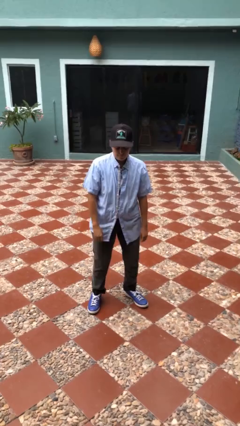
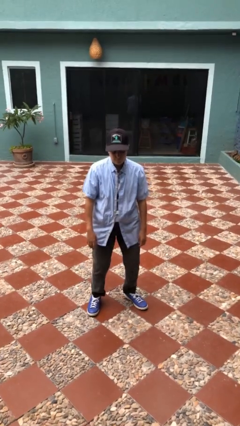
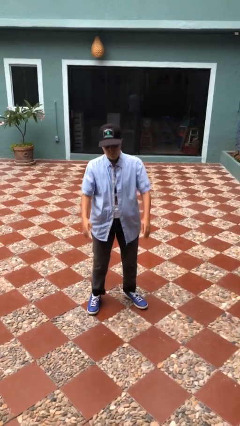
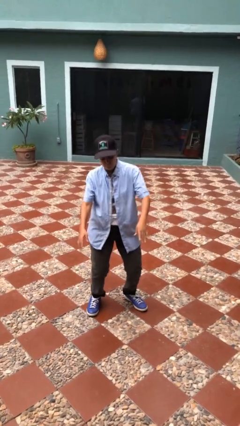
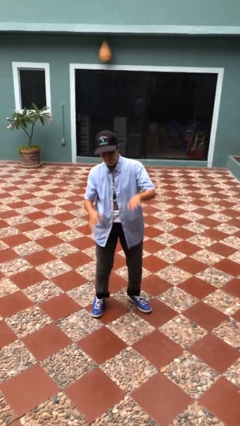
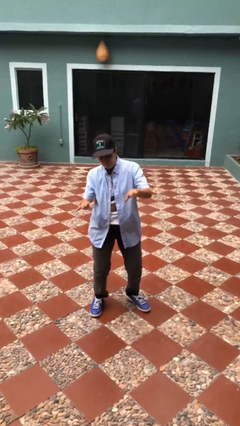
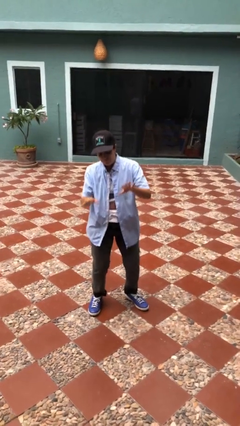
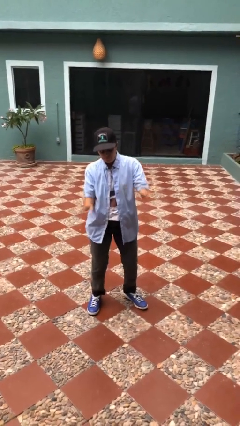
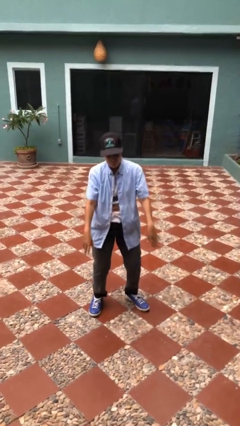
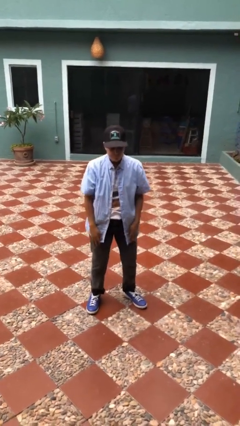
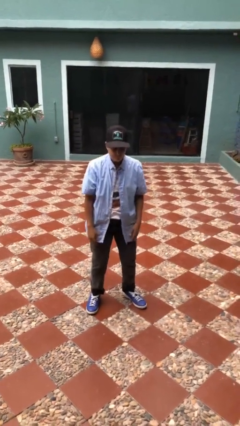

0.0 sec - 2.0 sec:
person dances in place

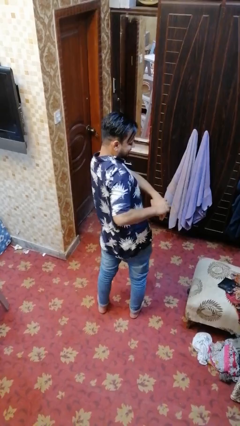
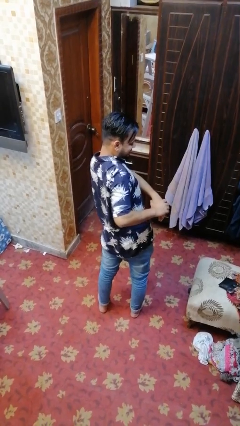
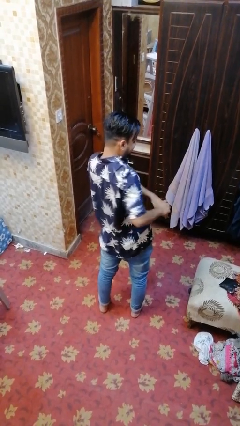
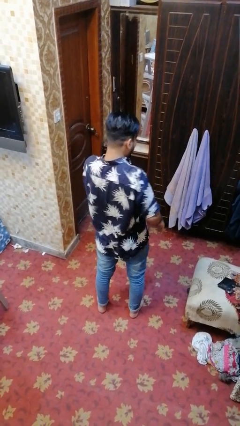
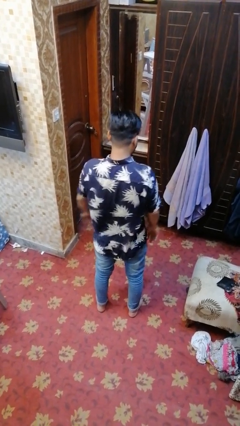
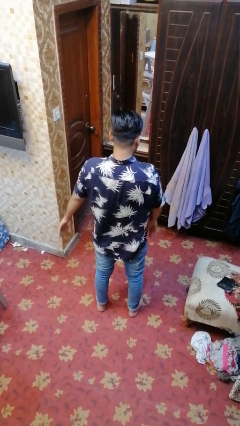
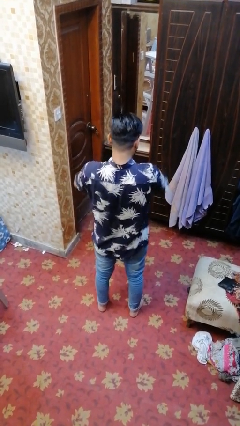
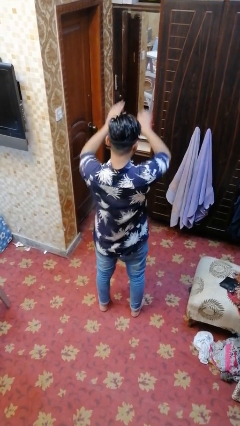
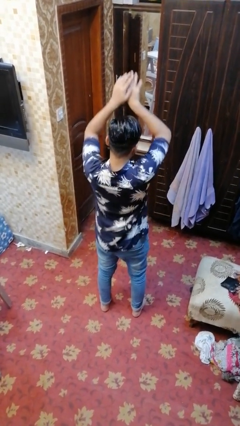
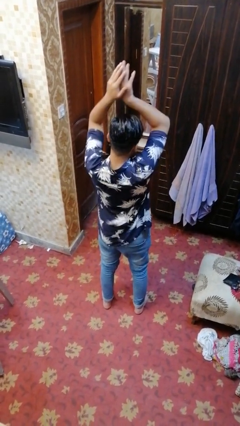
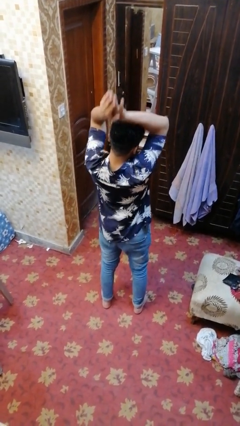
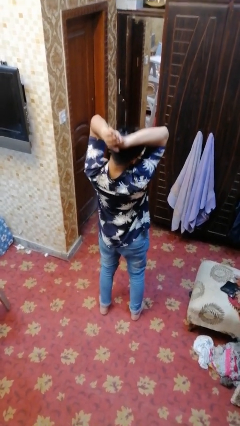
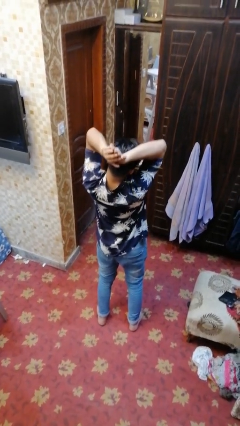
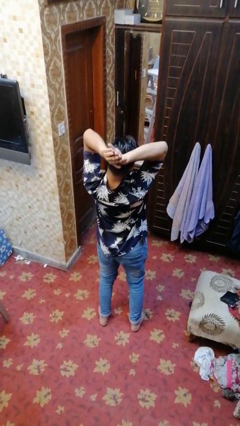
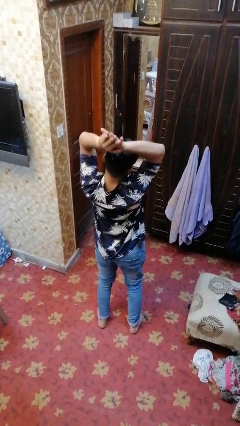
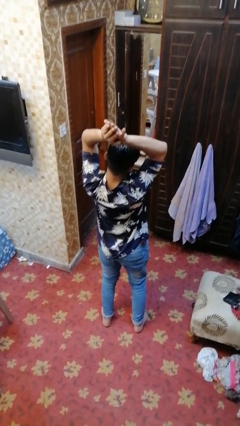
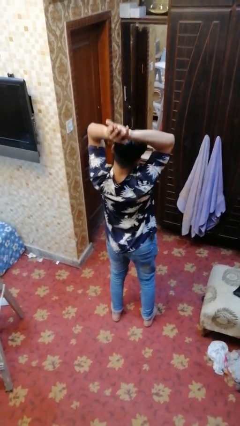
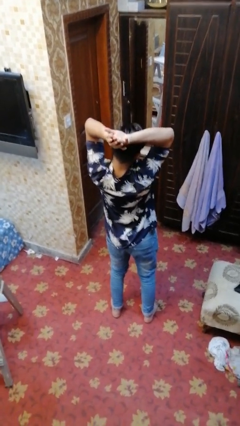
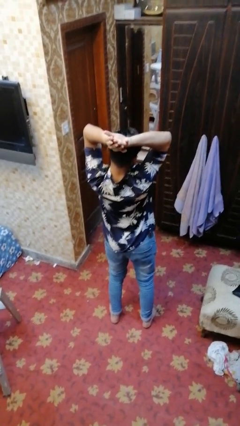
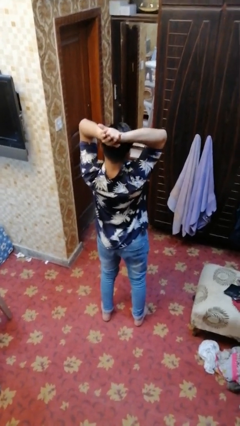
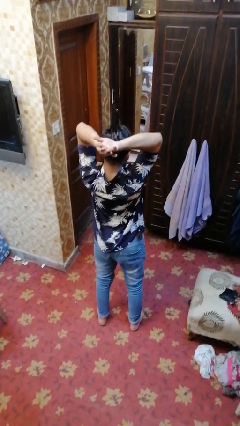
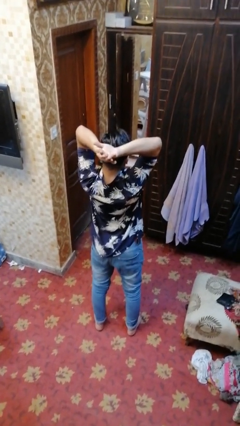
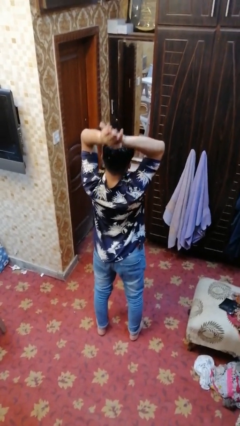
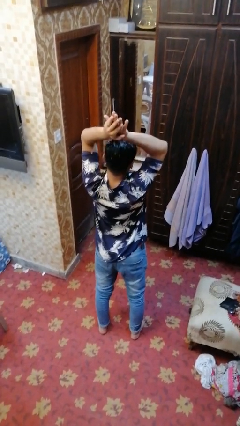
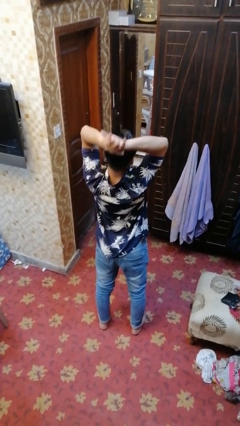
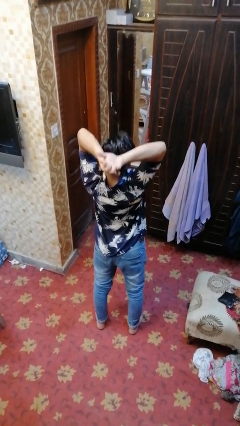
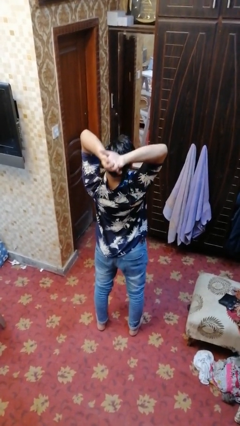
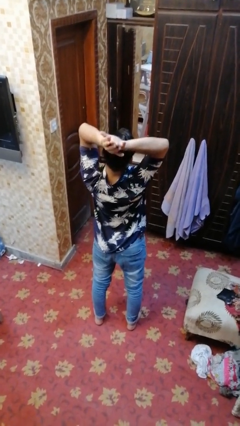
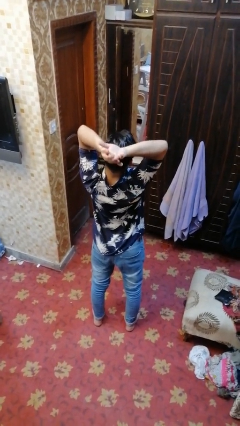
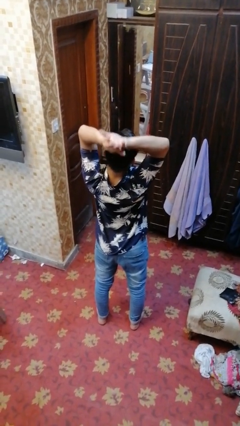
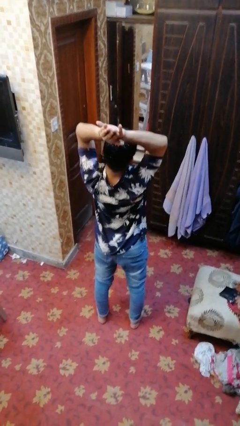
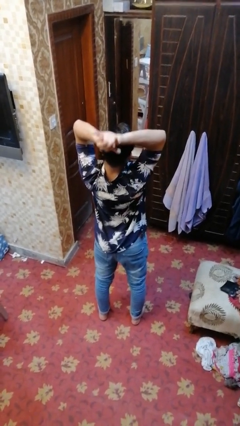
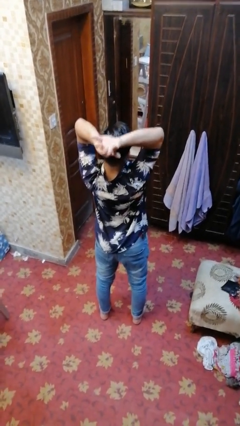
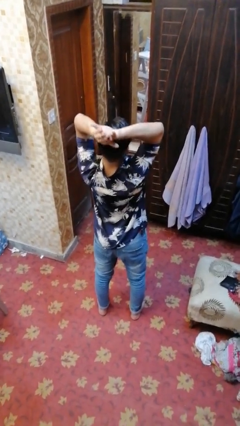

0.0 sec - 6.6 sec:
person stretches arms over head

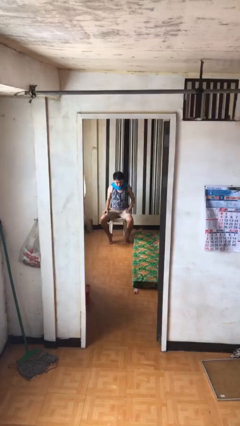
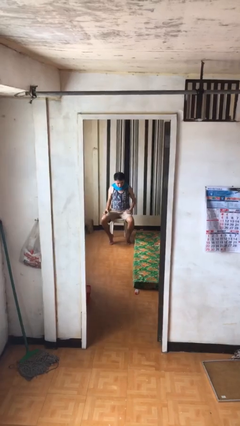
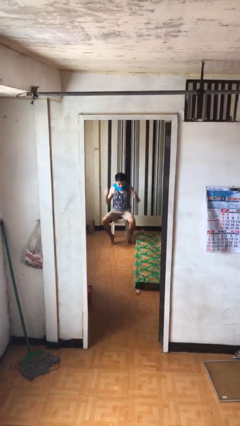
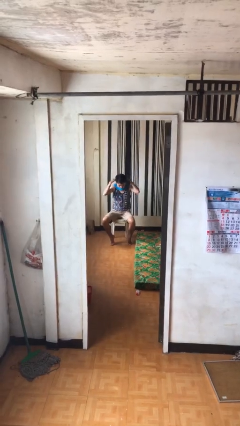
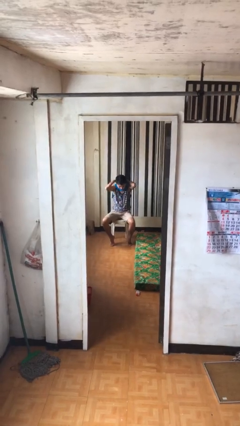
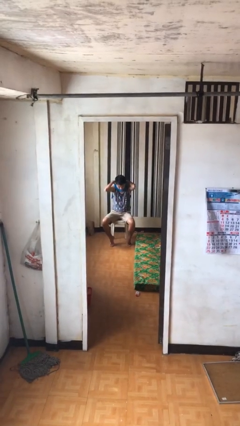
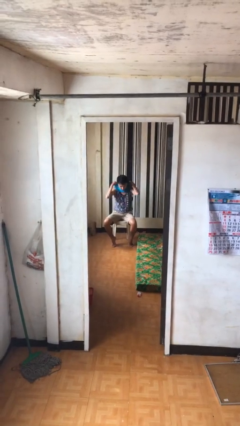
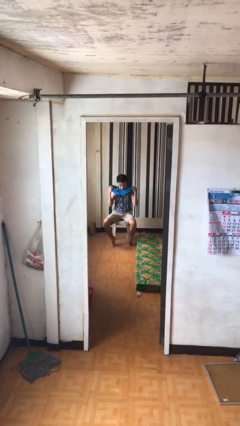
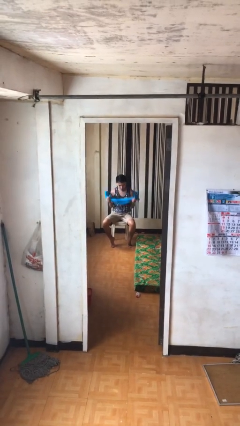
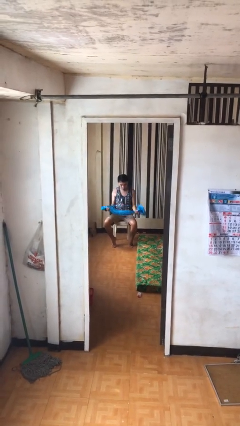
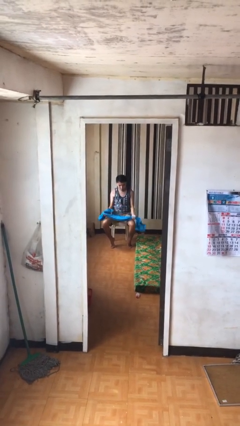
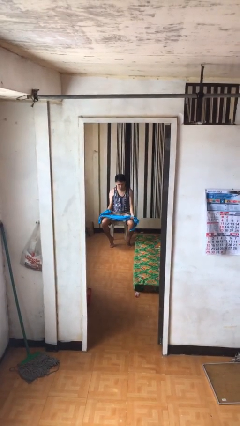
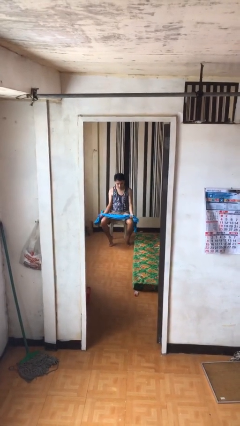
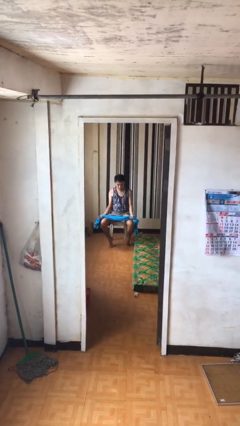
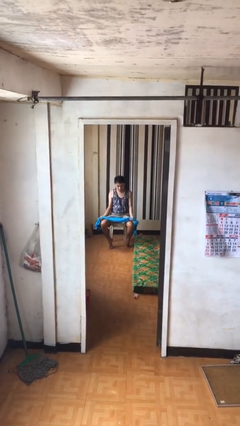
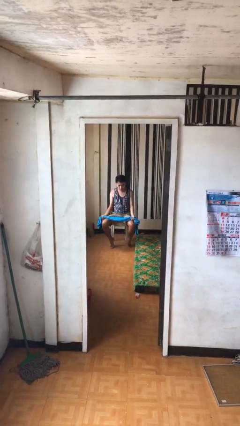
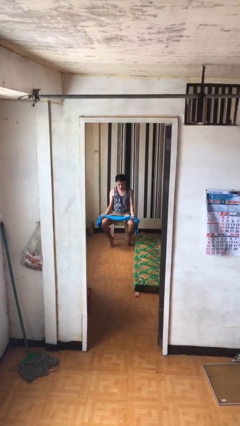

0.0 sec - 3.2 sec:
person takes off scarf

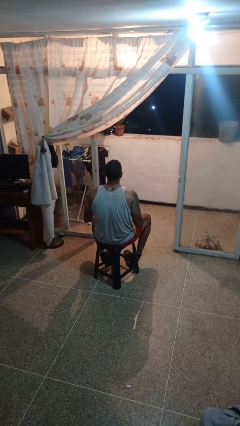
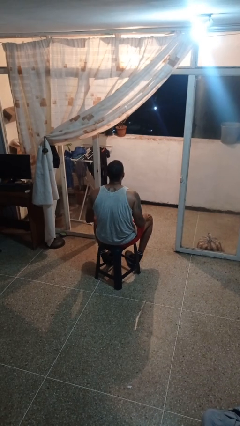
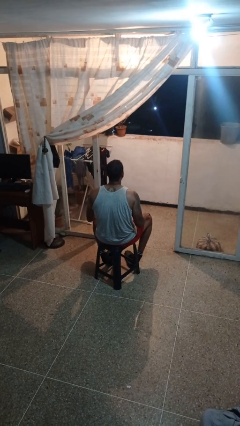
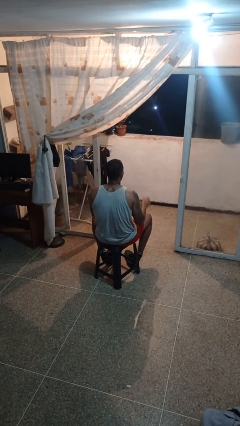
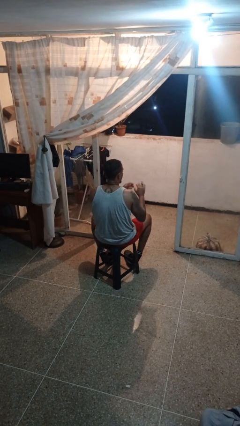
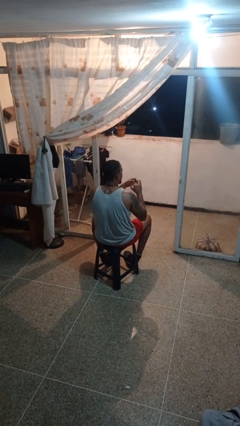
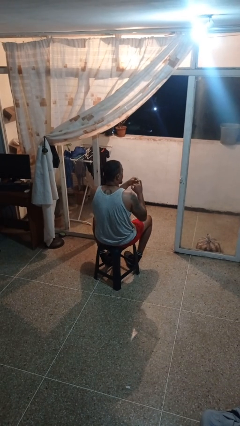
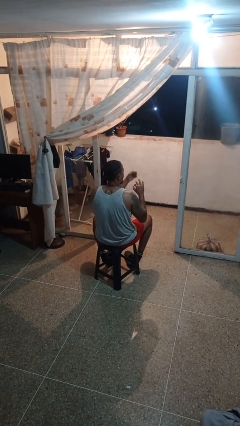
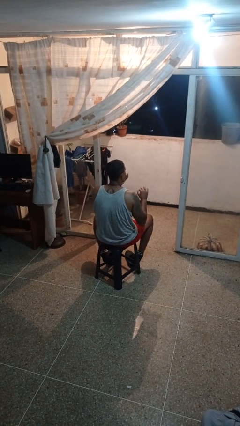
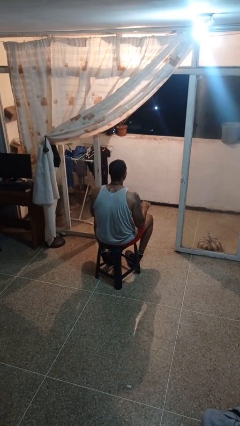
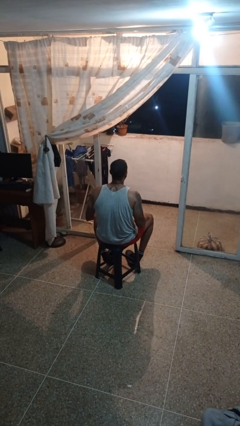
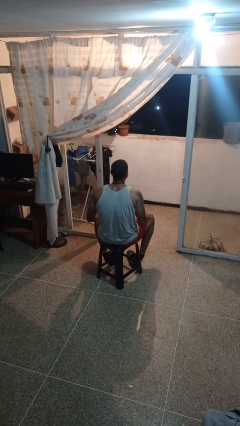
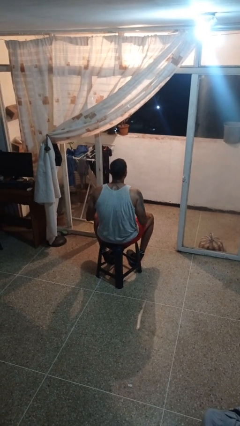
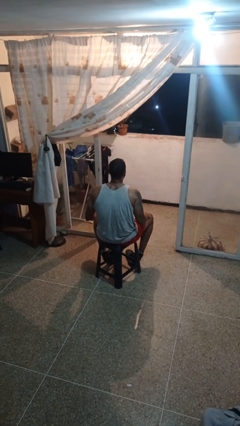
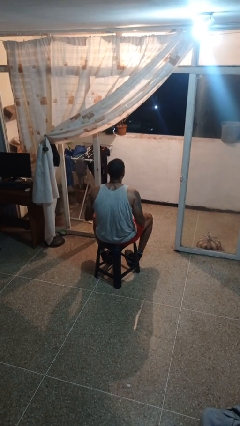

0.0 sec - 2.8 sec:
person takes off ring

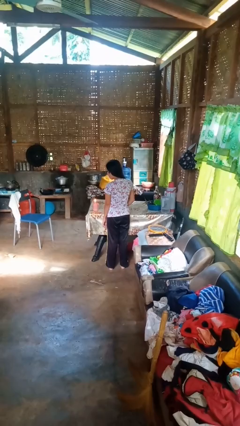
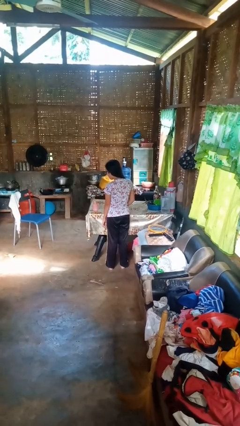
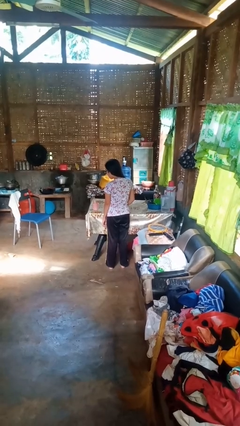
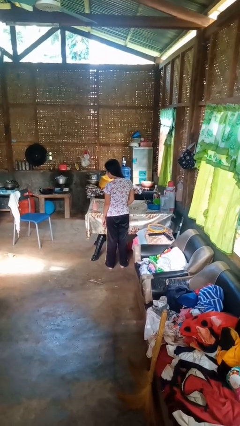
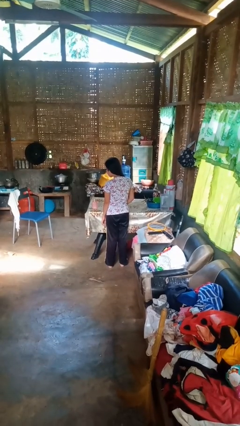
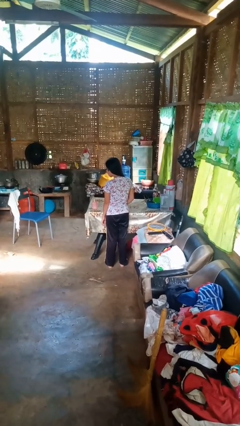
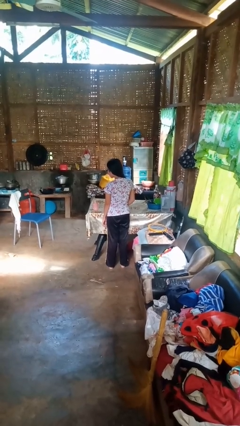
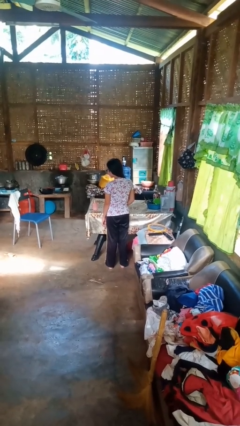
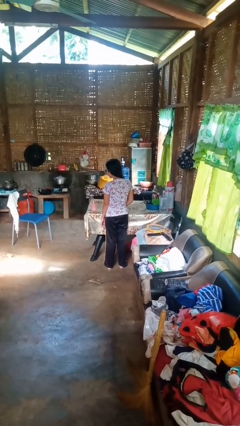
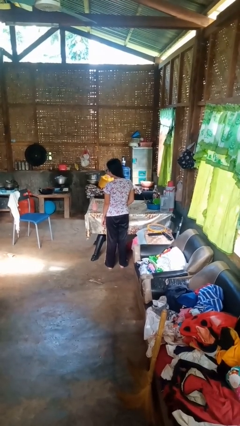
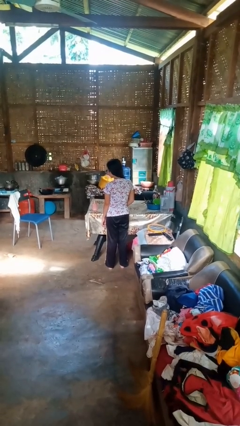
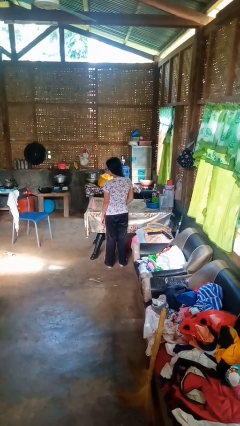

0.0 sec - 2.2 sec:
person extinguishes candle

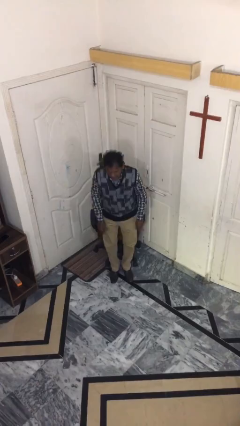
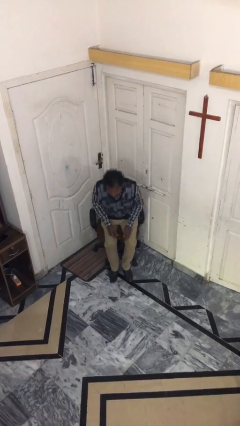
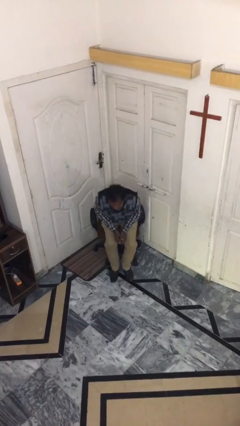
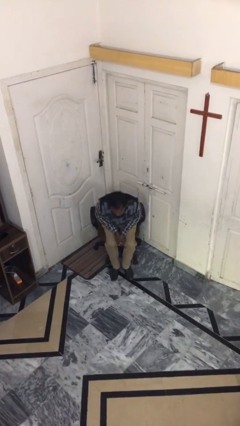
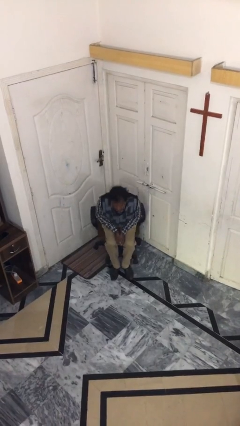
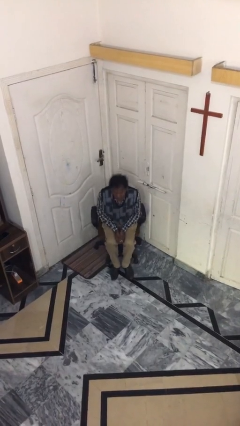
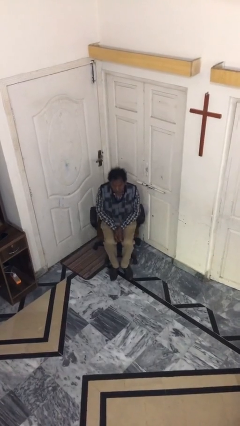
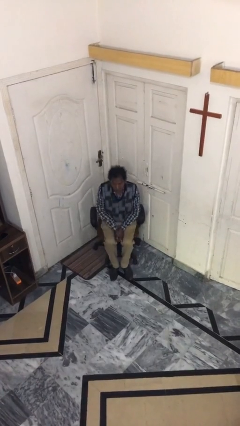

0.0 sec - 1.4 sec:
person sits down
